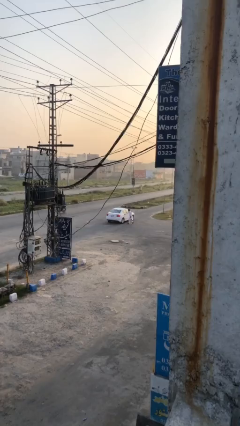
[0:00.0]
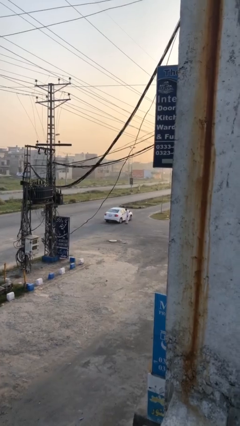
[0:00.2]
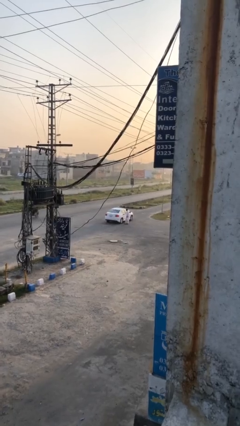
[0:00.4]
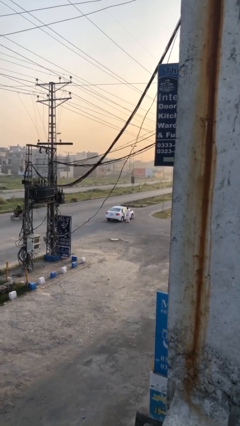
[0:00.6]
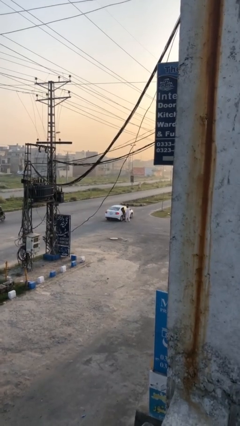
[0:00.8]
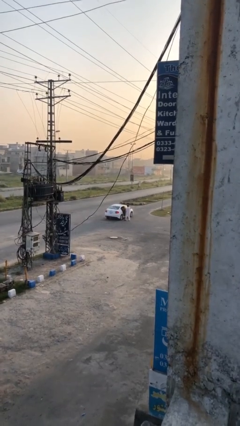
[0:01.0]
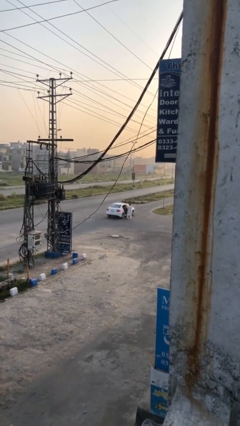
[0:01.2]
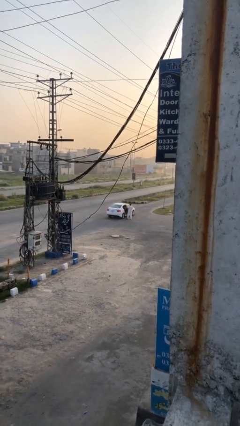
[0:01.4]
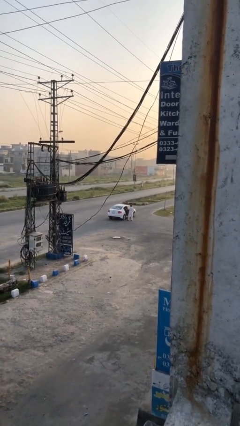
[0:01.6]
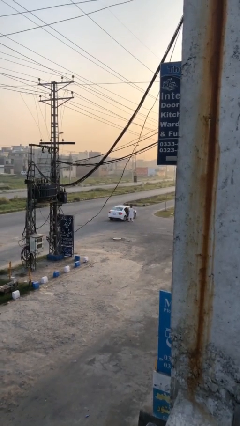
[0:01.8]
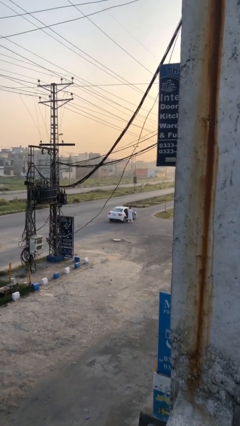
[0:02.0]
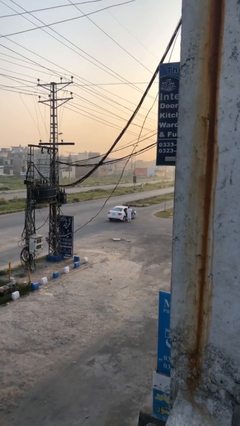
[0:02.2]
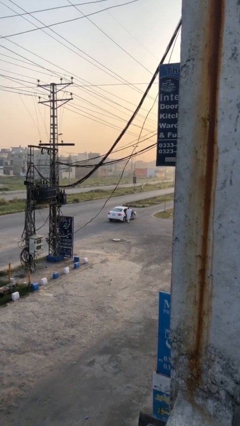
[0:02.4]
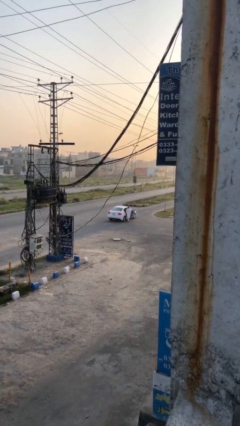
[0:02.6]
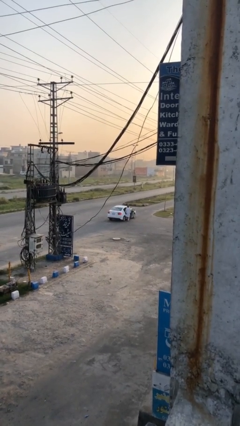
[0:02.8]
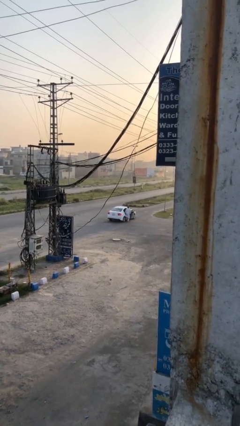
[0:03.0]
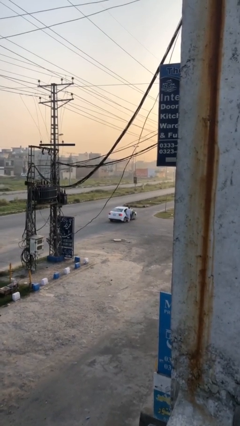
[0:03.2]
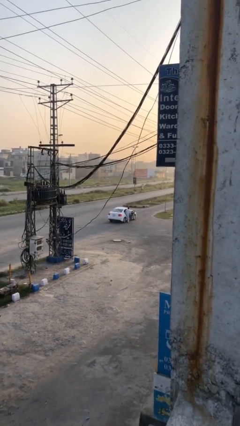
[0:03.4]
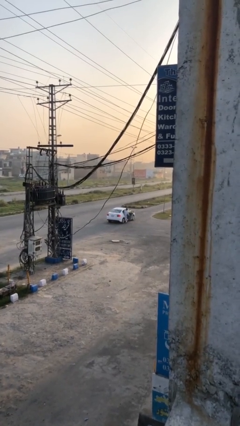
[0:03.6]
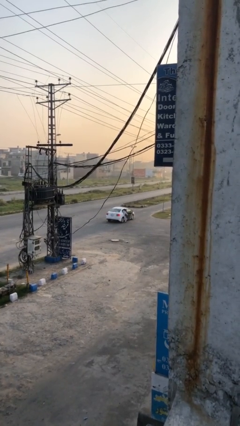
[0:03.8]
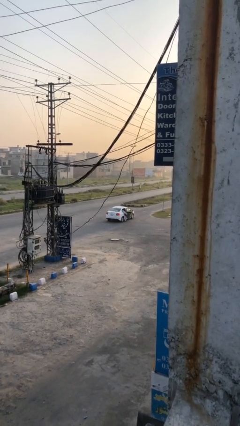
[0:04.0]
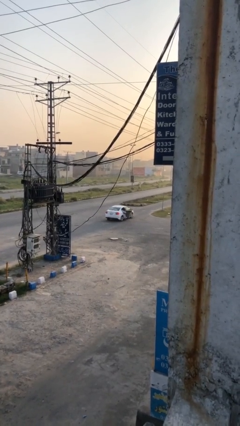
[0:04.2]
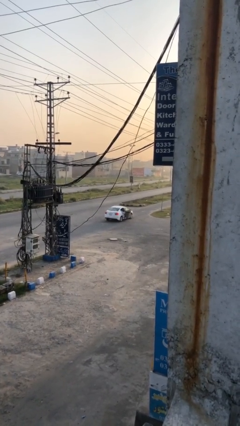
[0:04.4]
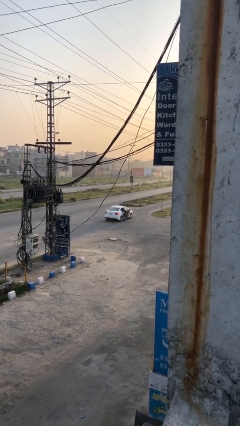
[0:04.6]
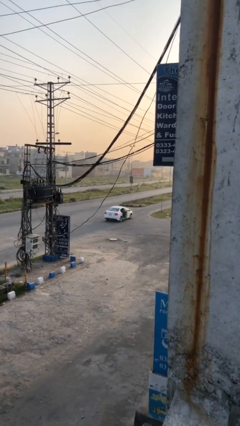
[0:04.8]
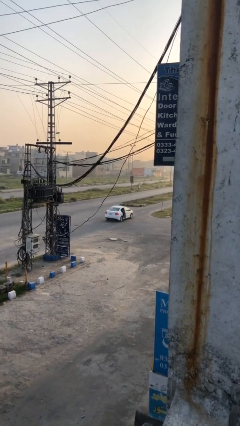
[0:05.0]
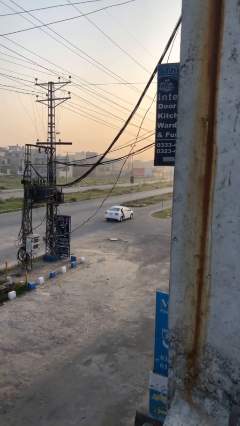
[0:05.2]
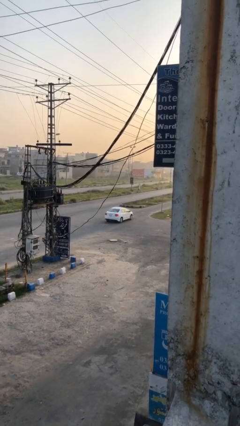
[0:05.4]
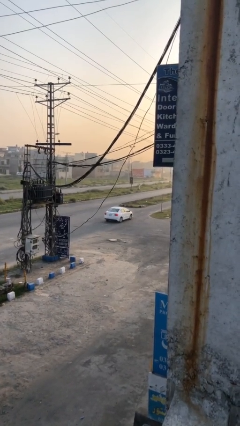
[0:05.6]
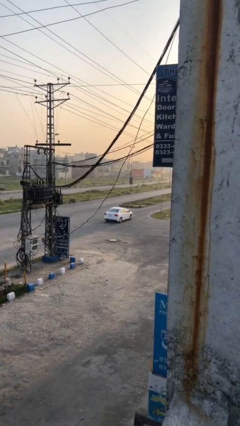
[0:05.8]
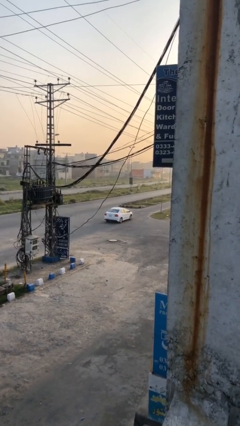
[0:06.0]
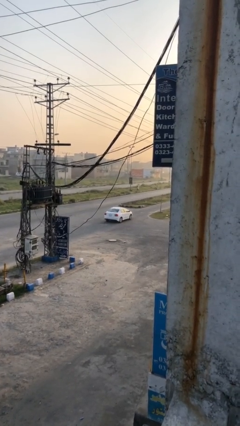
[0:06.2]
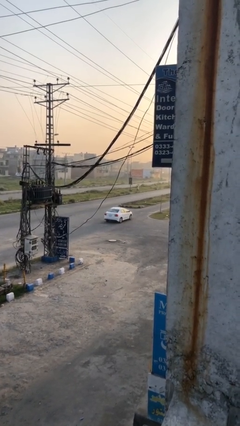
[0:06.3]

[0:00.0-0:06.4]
car picks up person

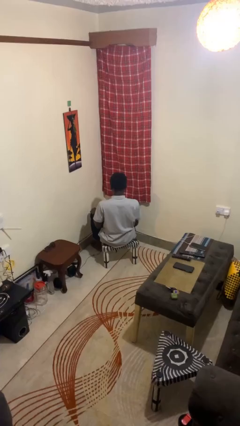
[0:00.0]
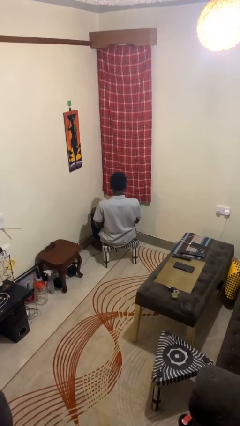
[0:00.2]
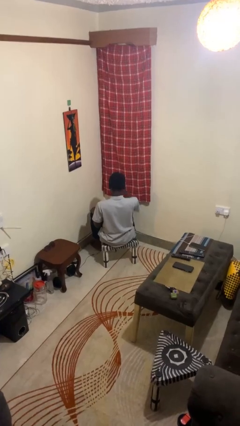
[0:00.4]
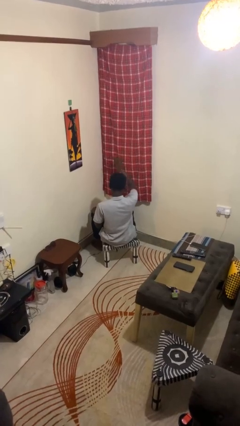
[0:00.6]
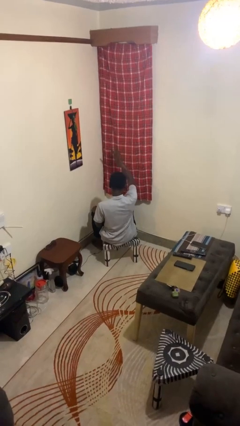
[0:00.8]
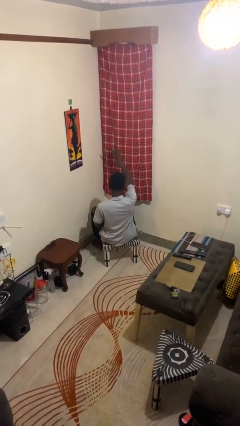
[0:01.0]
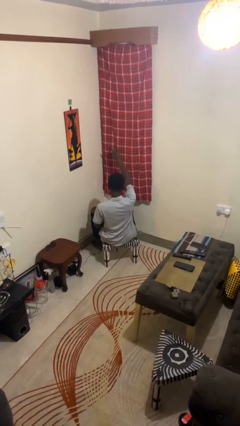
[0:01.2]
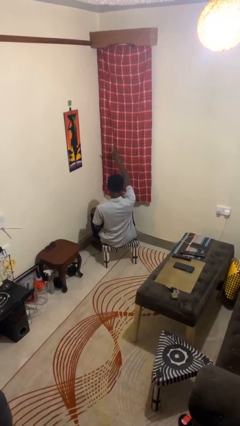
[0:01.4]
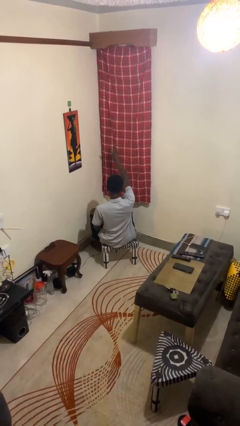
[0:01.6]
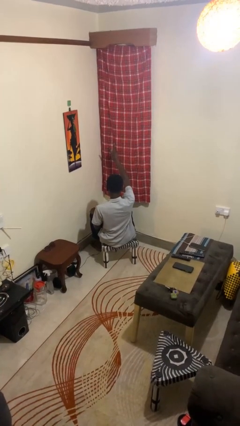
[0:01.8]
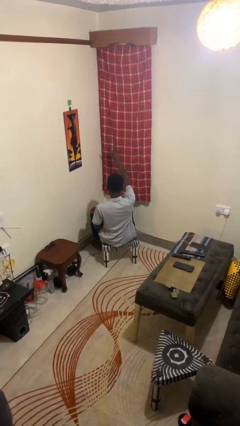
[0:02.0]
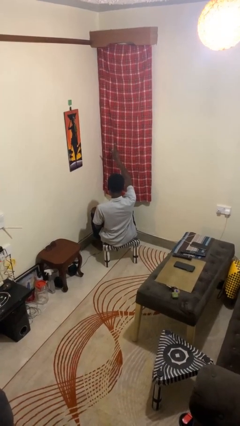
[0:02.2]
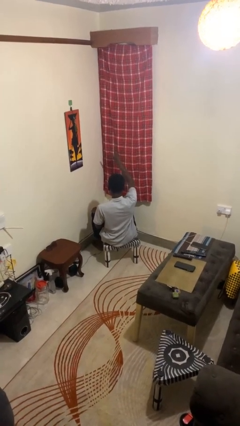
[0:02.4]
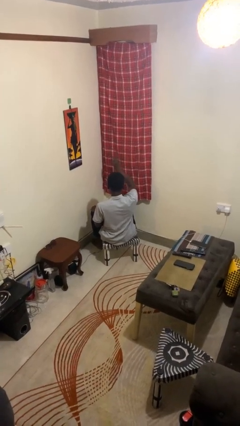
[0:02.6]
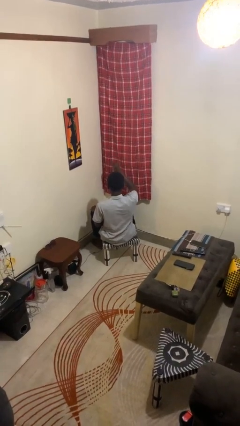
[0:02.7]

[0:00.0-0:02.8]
person gestures peace

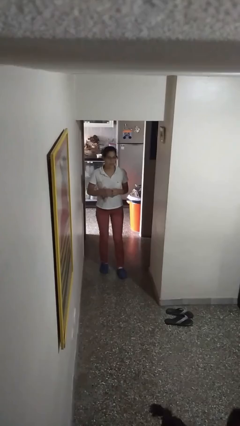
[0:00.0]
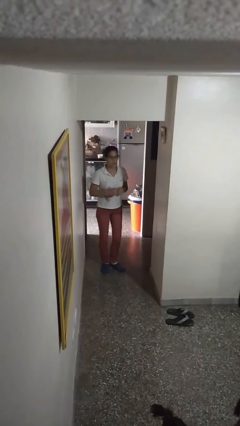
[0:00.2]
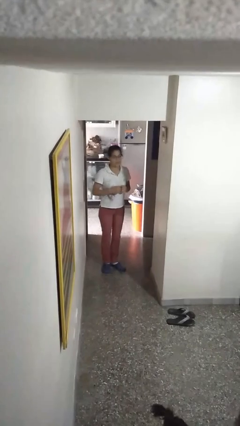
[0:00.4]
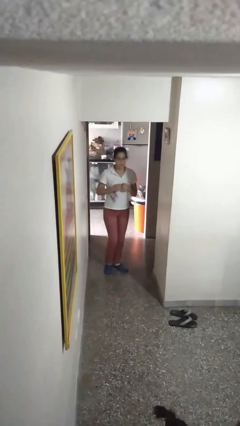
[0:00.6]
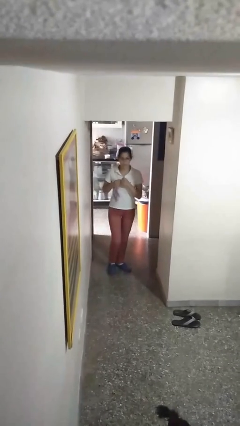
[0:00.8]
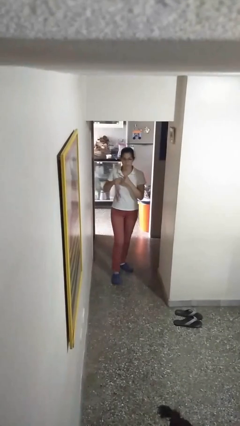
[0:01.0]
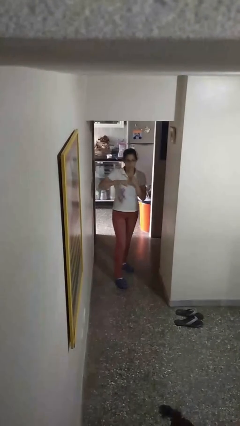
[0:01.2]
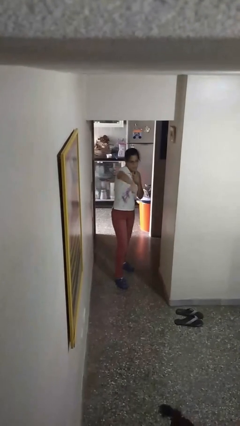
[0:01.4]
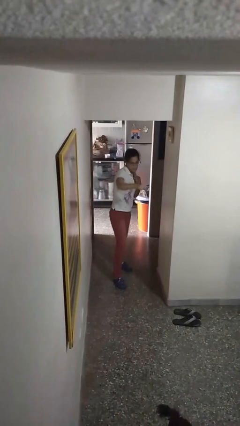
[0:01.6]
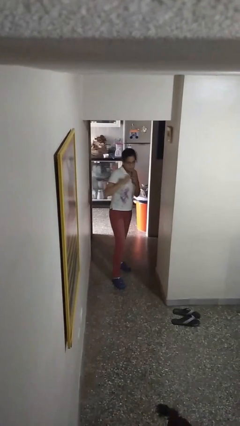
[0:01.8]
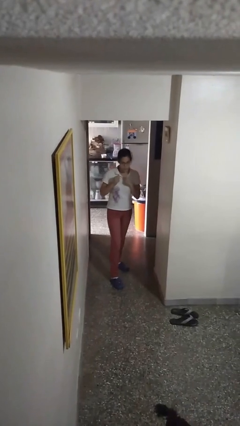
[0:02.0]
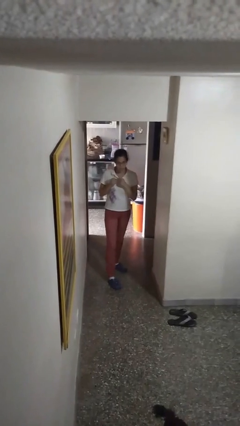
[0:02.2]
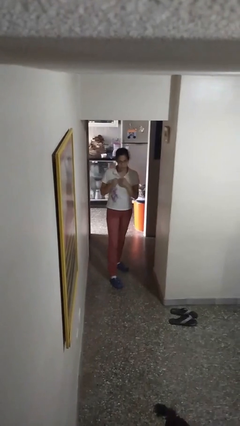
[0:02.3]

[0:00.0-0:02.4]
person karate chop

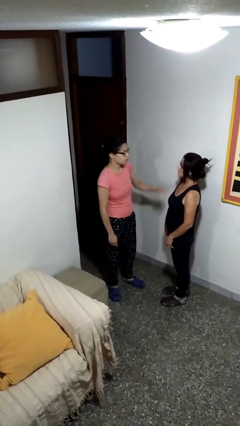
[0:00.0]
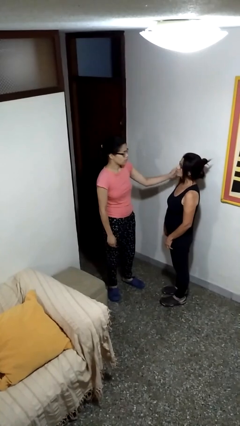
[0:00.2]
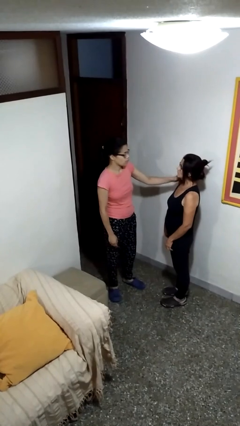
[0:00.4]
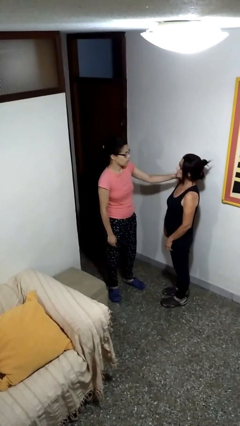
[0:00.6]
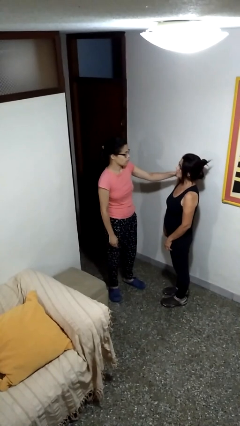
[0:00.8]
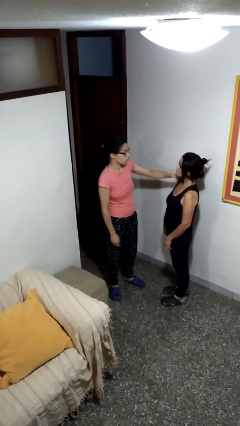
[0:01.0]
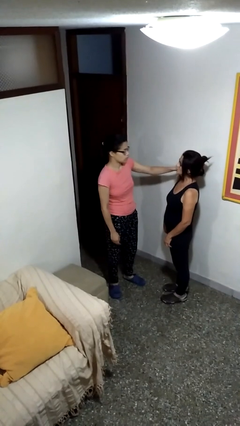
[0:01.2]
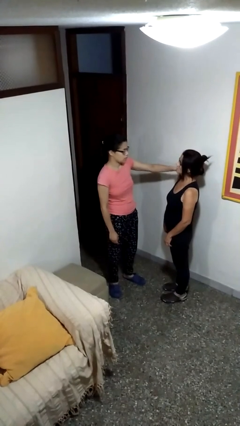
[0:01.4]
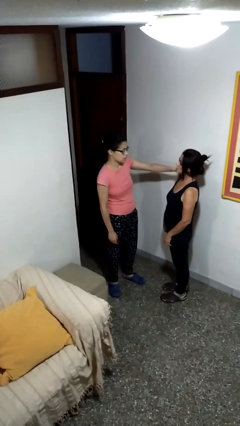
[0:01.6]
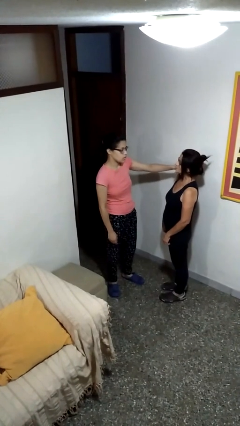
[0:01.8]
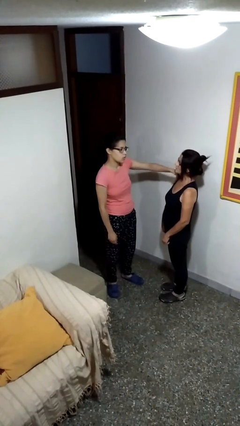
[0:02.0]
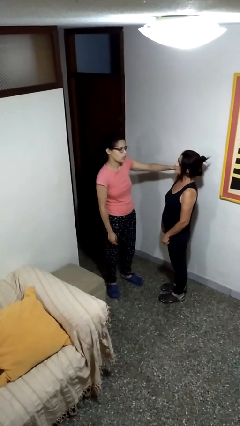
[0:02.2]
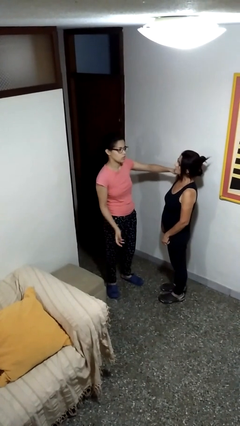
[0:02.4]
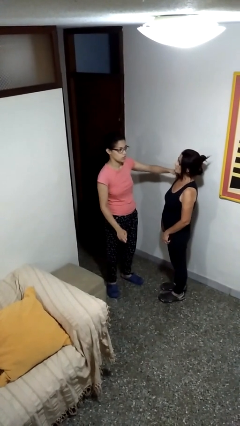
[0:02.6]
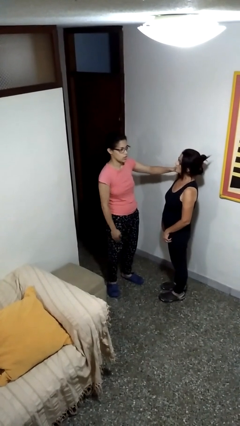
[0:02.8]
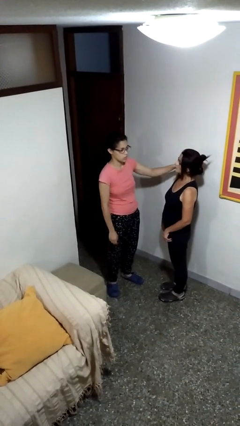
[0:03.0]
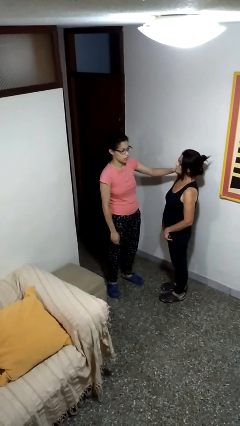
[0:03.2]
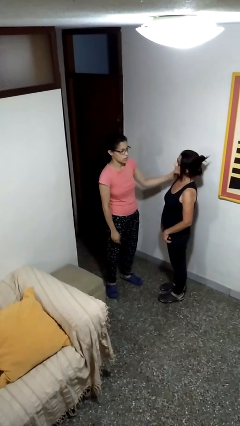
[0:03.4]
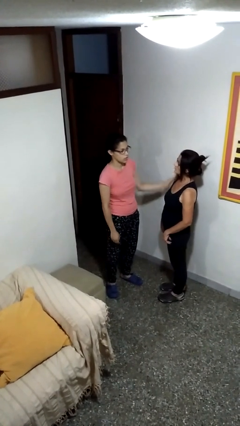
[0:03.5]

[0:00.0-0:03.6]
person pounds shoulders of person

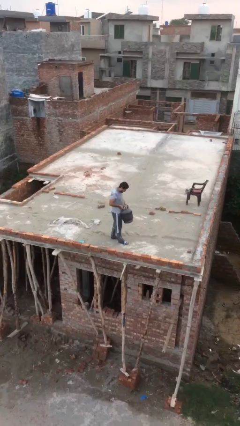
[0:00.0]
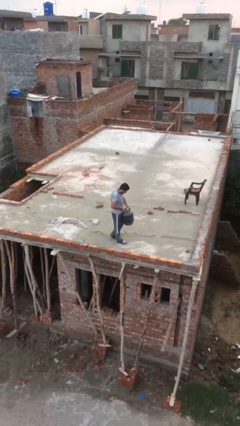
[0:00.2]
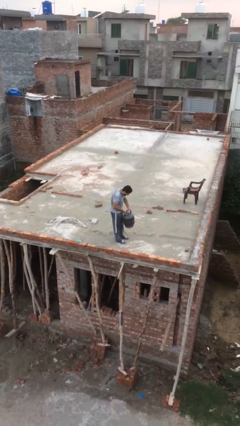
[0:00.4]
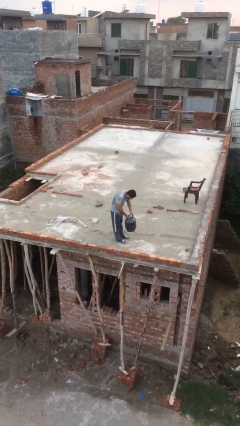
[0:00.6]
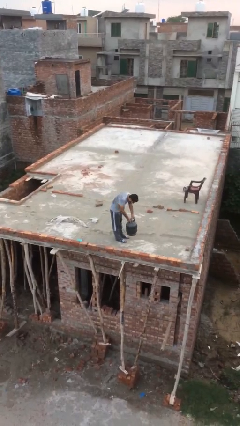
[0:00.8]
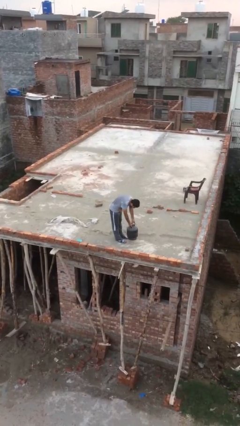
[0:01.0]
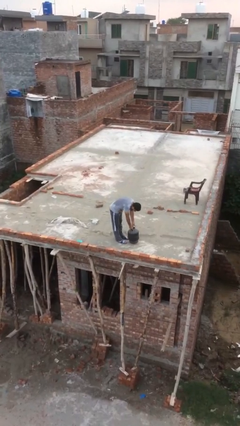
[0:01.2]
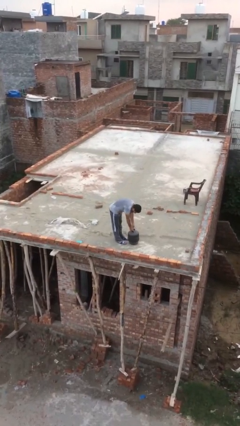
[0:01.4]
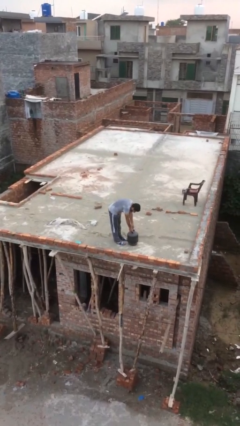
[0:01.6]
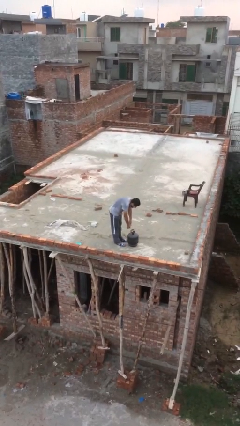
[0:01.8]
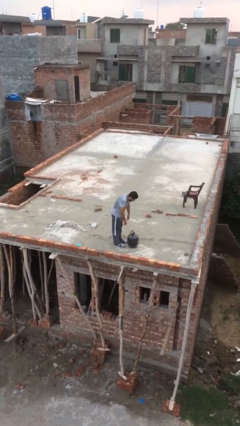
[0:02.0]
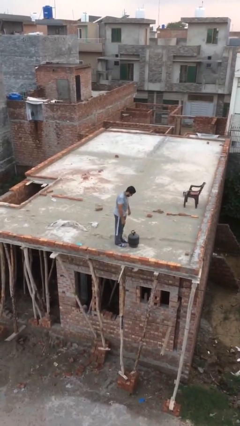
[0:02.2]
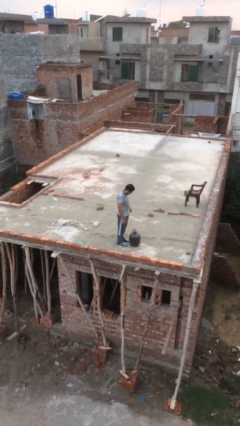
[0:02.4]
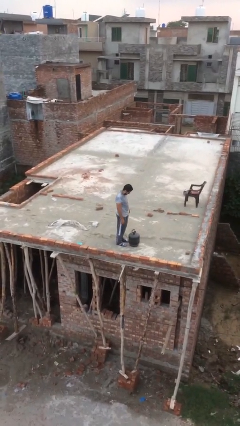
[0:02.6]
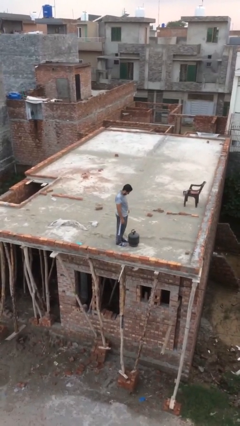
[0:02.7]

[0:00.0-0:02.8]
person puts down object on floor
